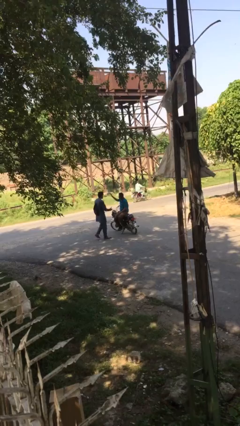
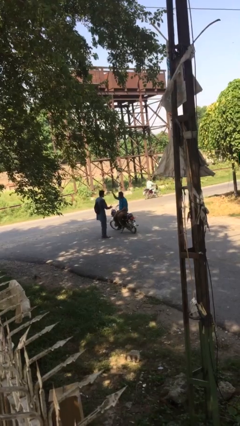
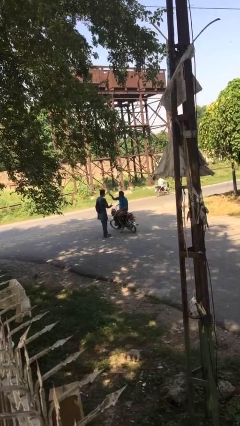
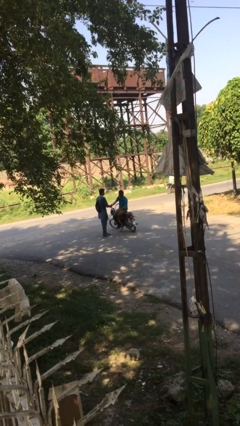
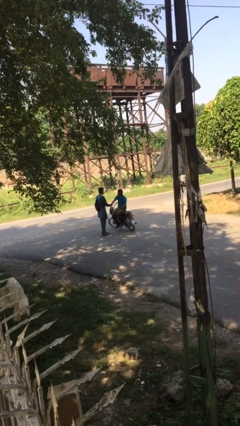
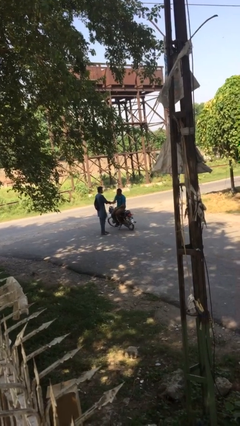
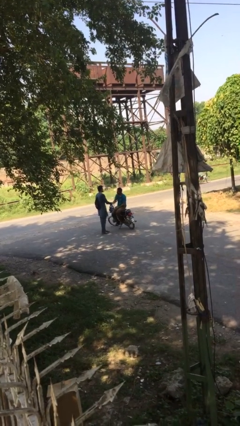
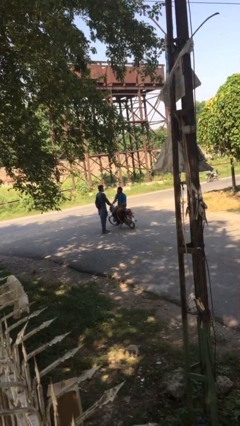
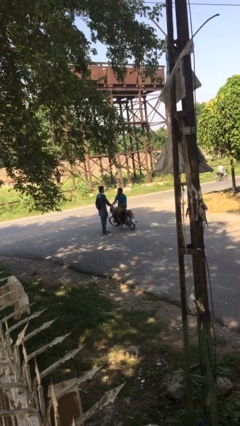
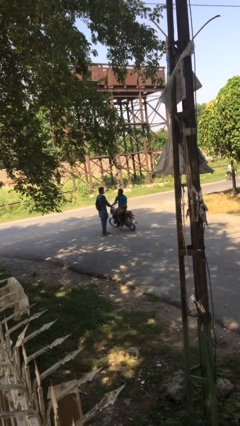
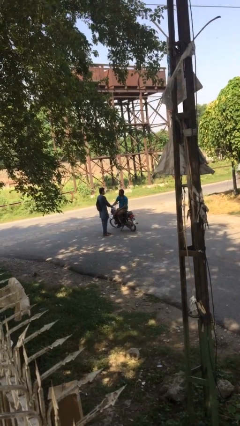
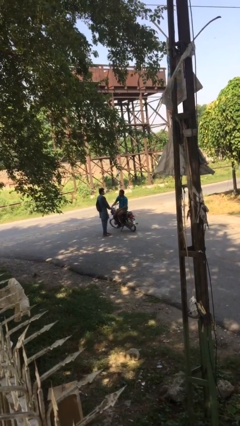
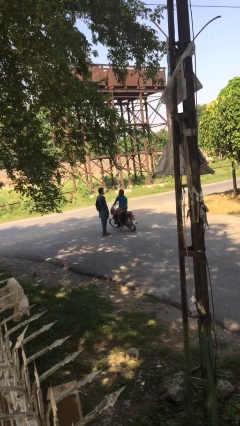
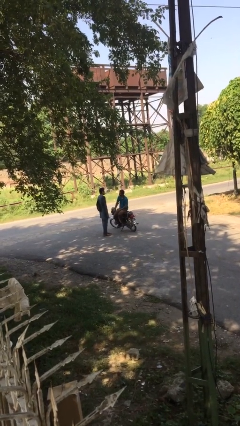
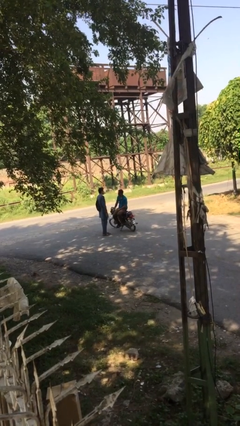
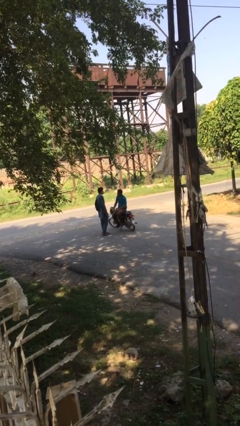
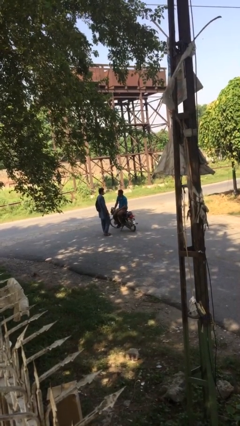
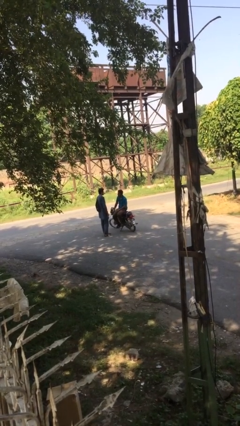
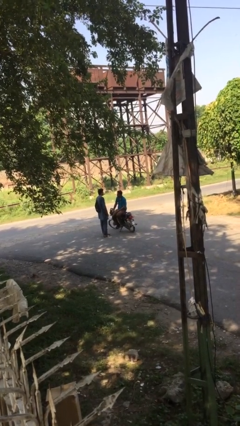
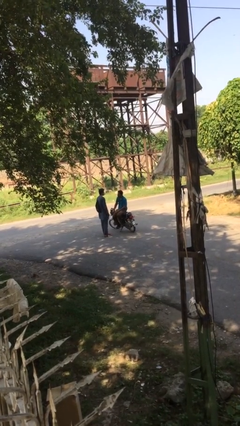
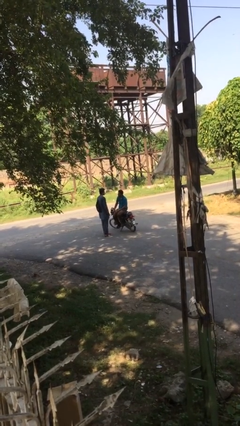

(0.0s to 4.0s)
person shakes hand

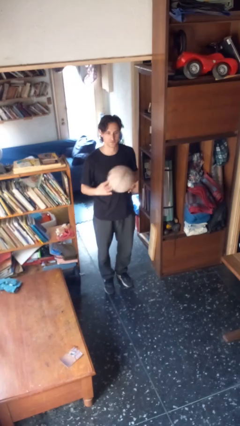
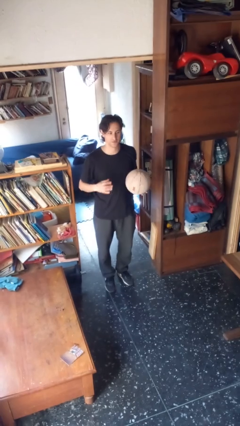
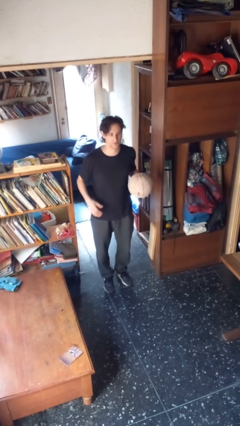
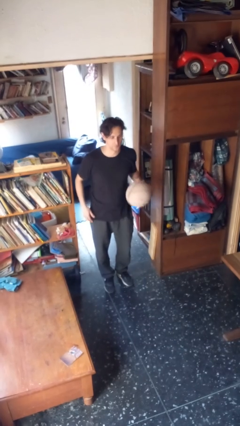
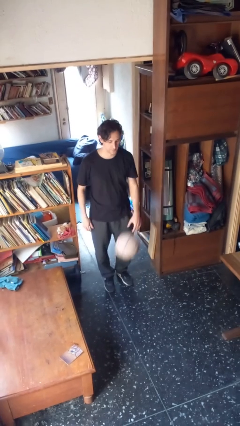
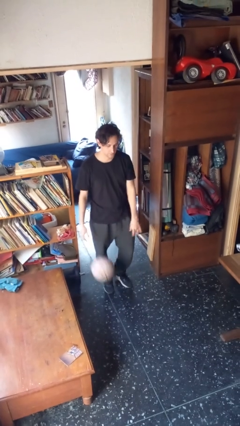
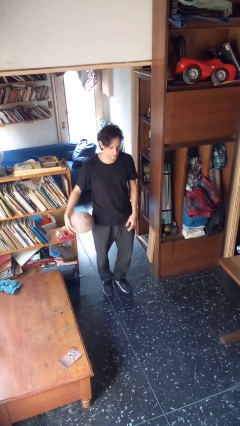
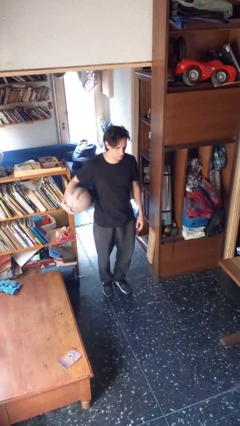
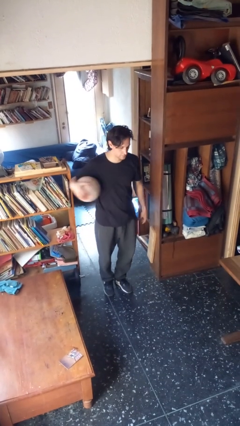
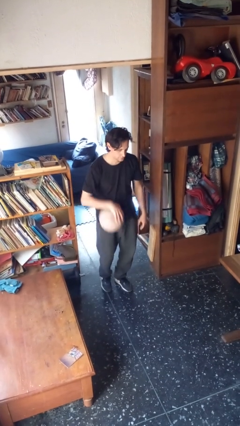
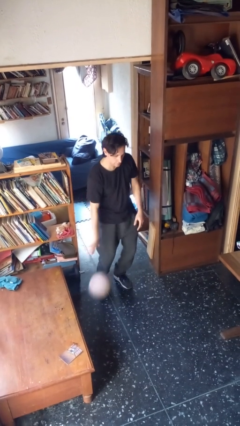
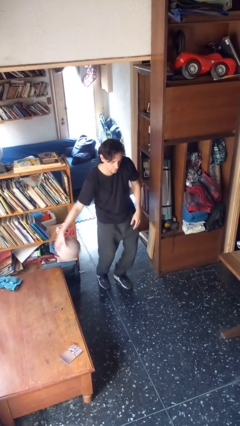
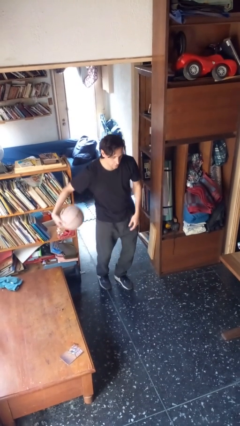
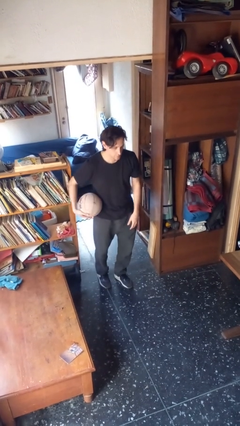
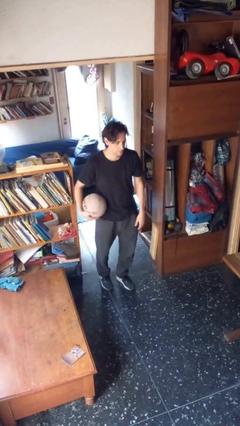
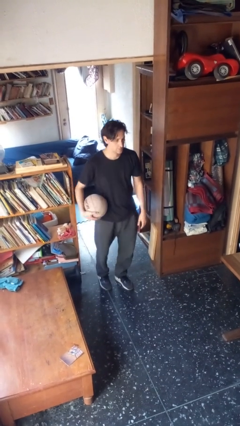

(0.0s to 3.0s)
person bounces ball on floor

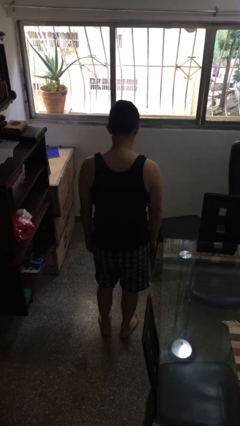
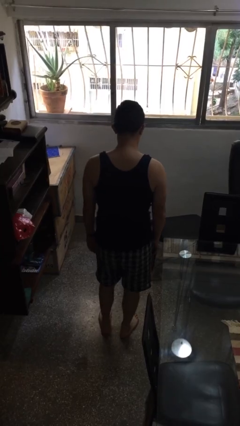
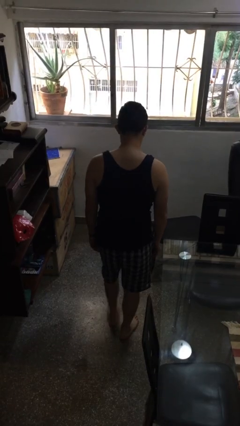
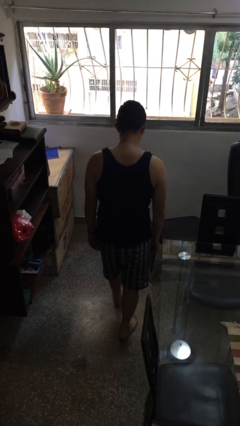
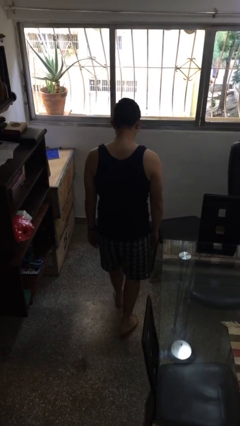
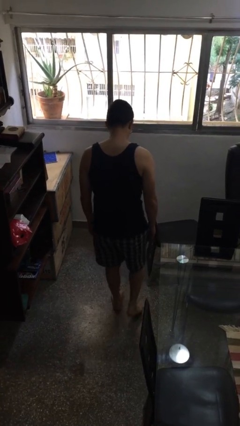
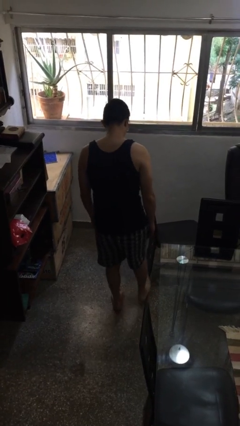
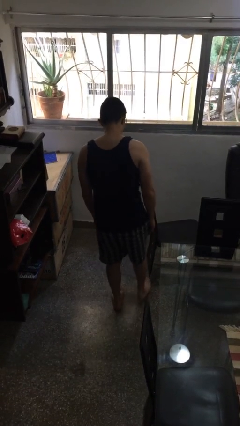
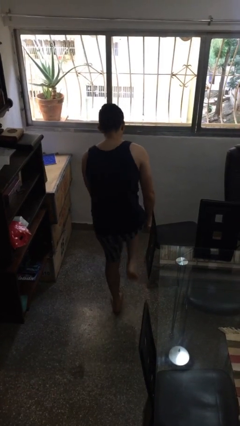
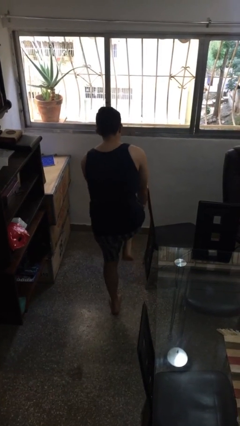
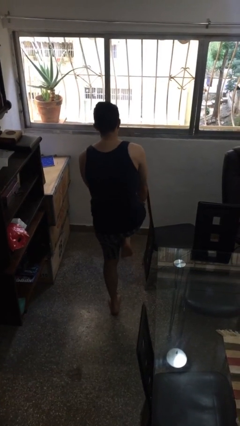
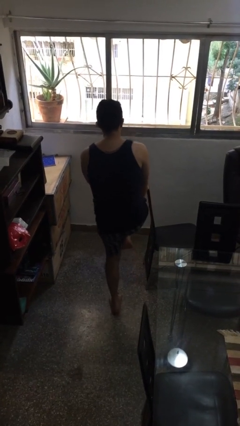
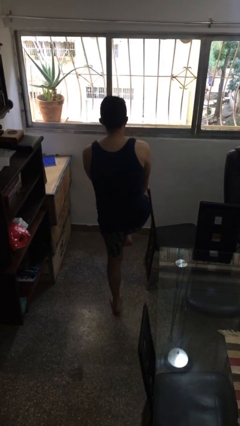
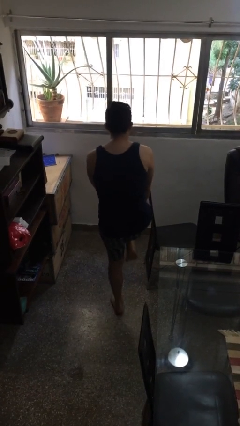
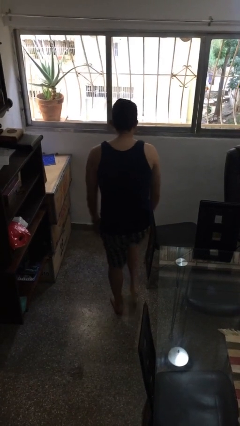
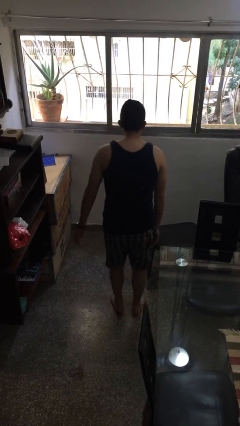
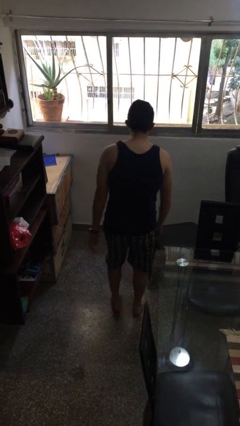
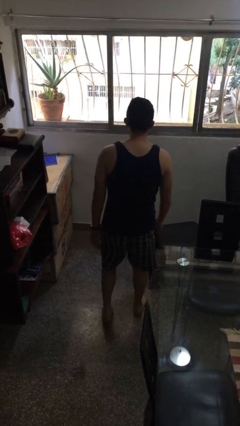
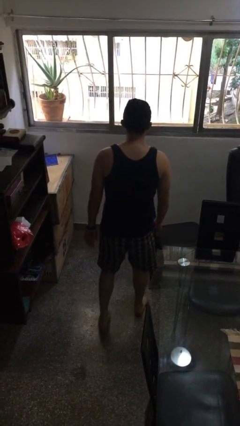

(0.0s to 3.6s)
person stubs toe

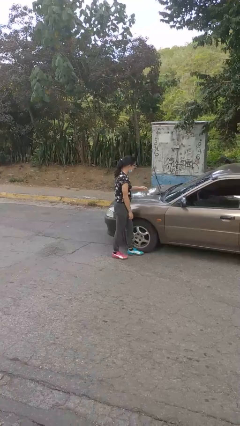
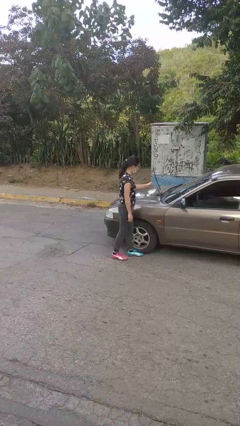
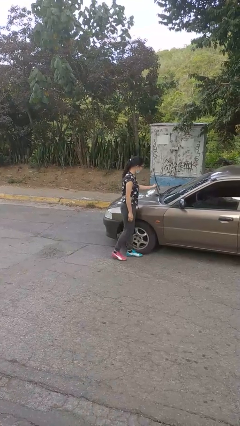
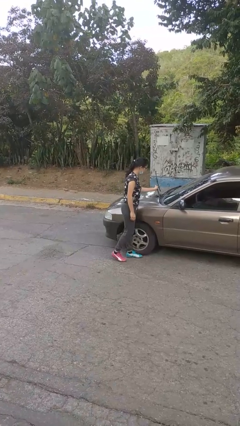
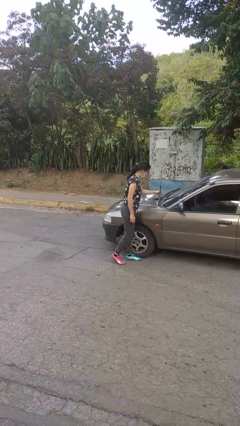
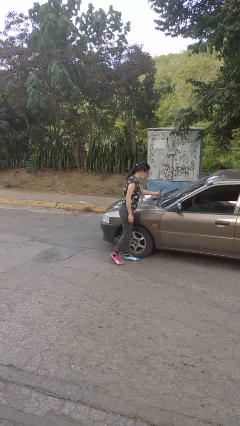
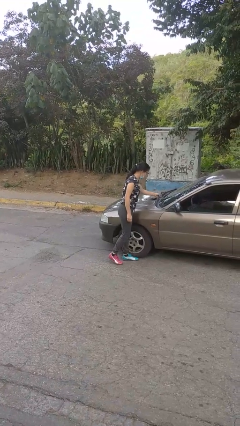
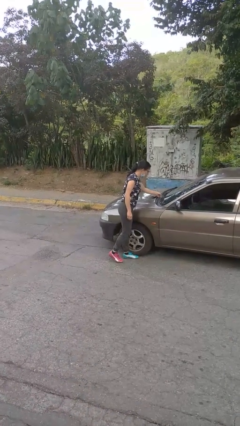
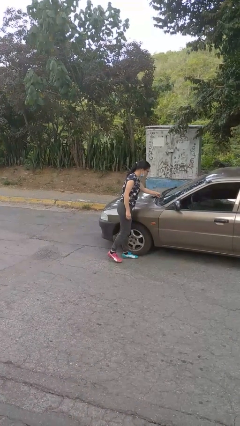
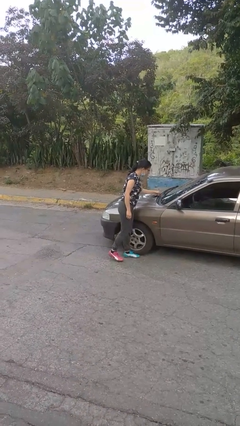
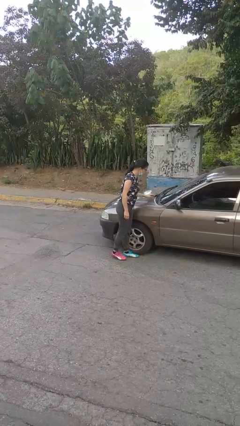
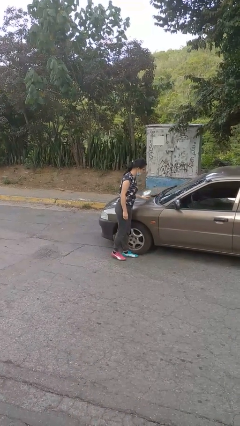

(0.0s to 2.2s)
person flips down car wipers

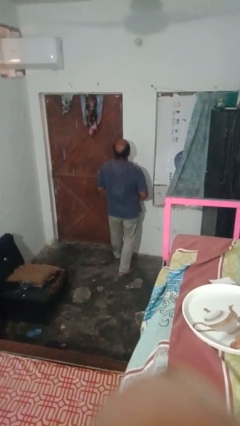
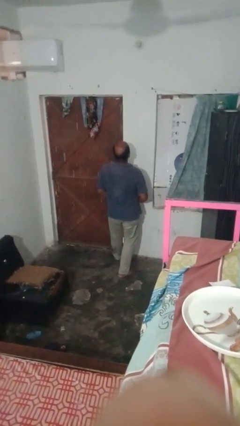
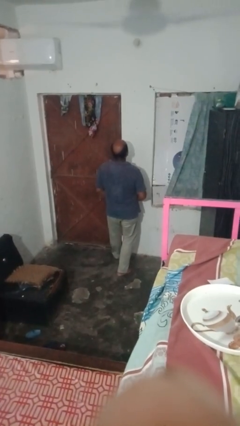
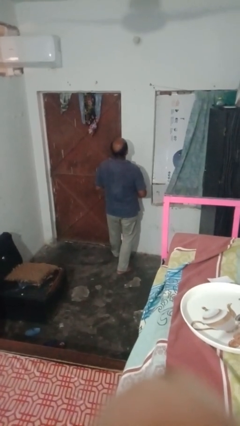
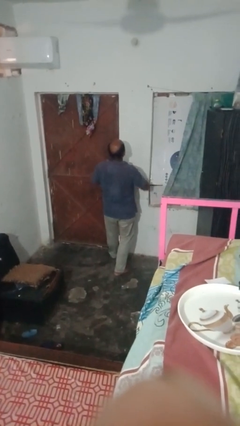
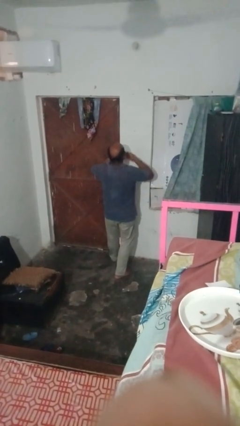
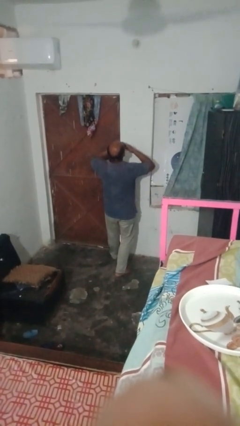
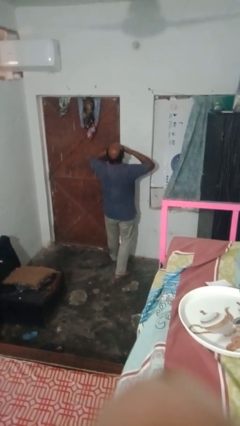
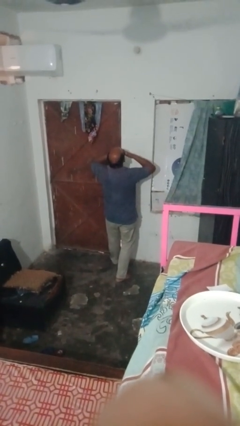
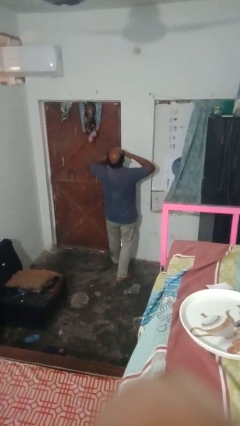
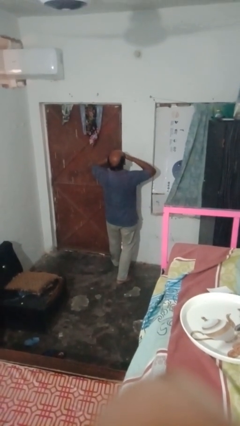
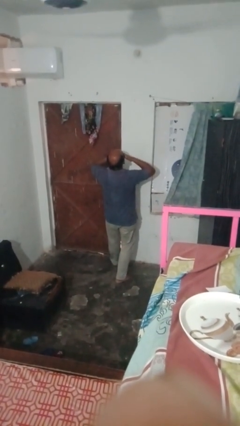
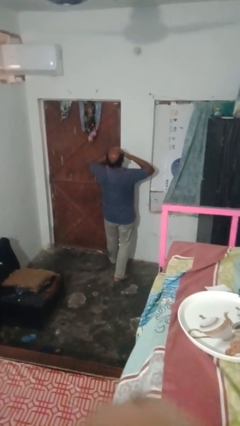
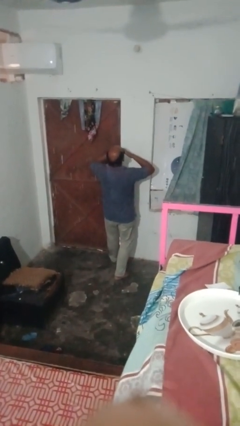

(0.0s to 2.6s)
person yawns

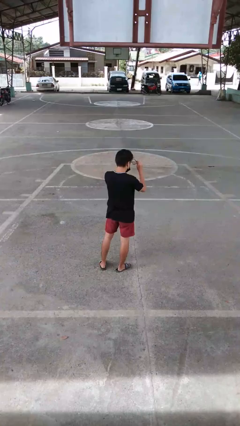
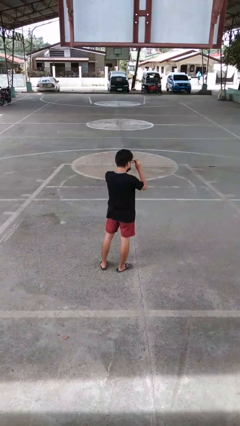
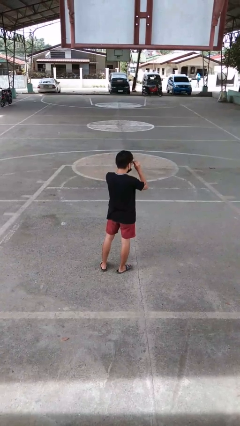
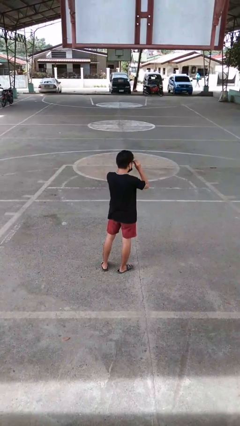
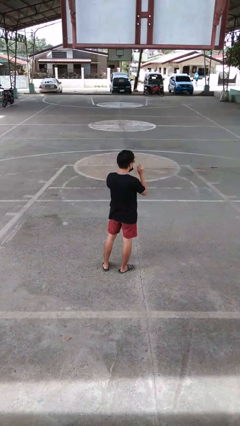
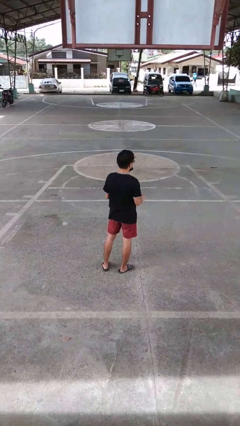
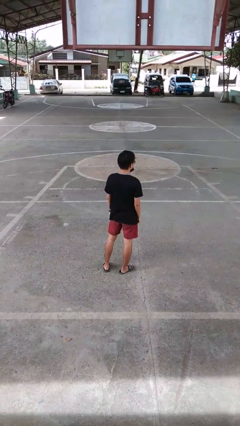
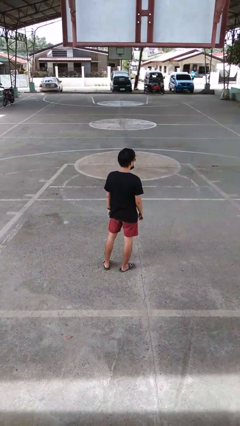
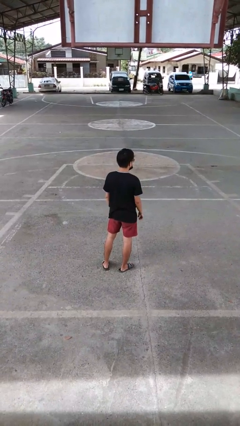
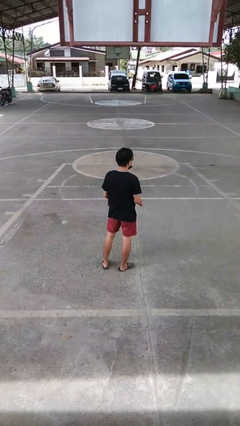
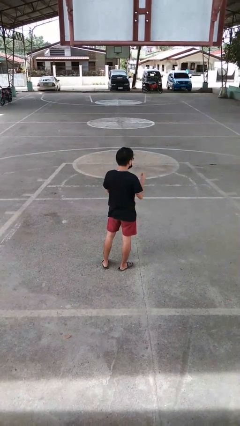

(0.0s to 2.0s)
person puts on glasses
